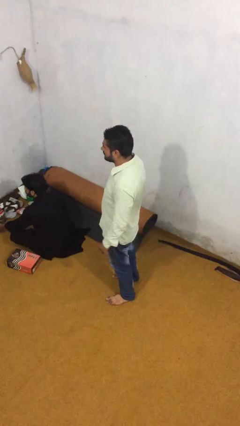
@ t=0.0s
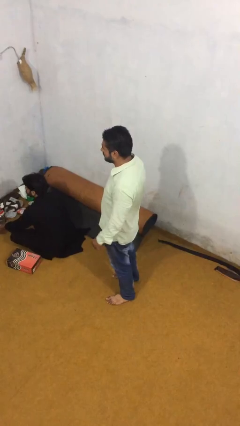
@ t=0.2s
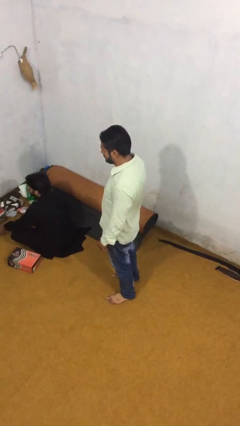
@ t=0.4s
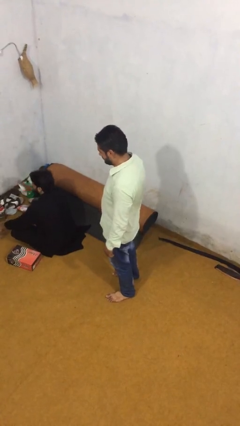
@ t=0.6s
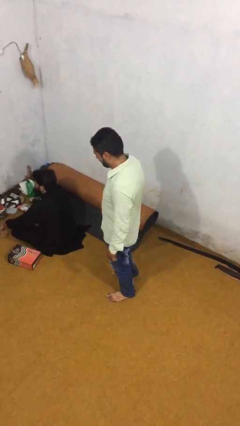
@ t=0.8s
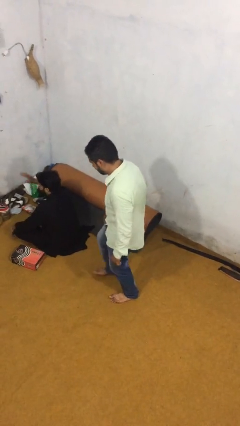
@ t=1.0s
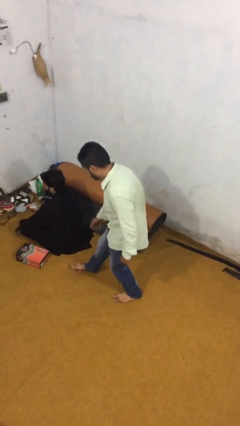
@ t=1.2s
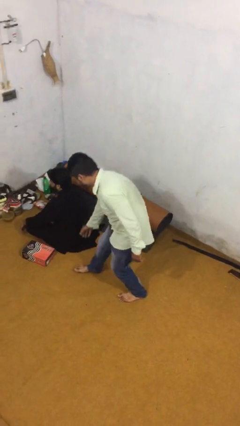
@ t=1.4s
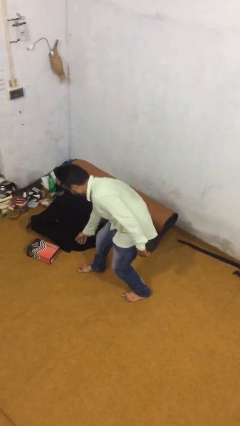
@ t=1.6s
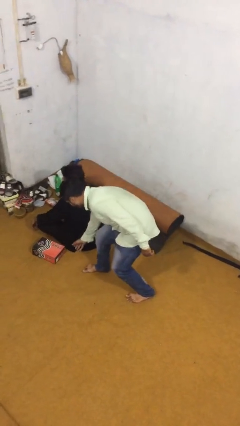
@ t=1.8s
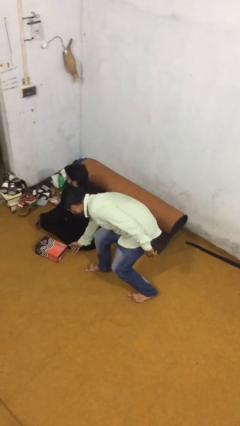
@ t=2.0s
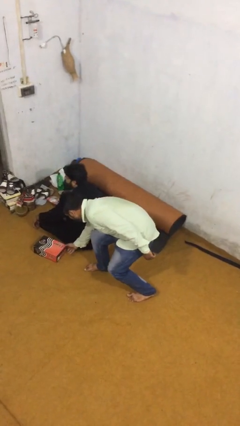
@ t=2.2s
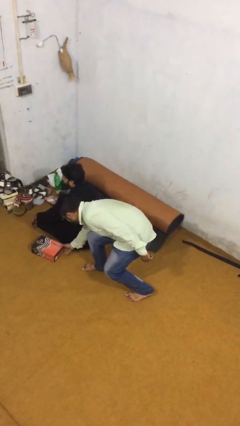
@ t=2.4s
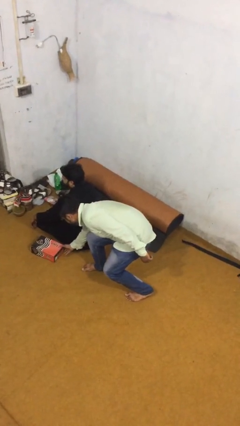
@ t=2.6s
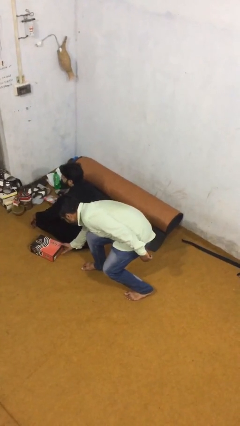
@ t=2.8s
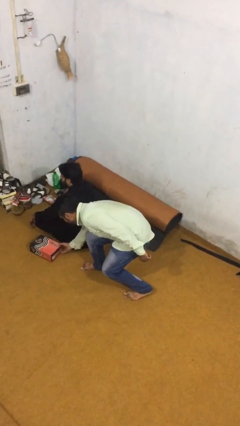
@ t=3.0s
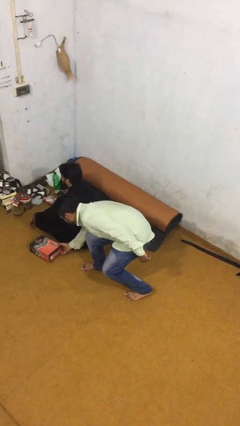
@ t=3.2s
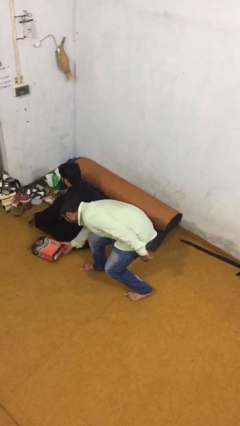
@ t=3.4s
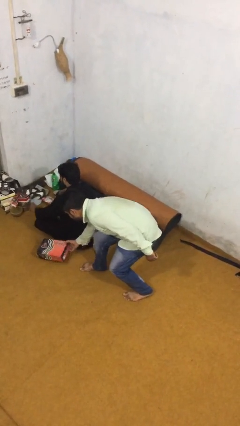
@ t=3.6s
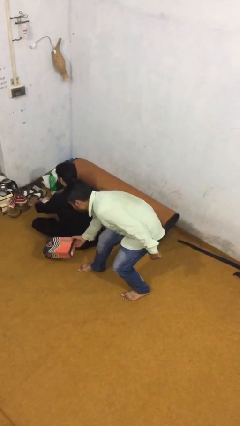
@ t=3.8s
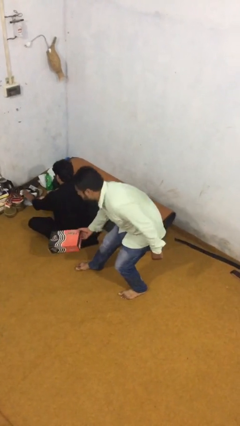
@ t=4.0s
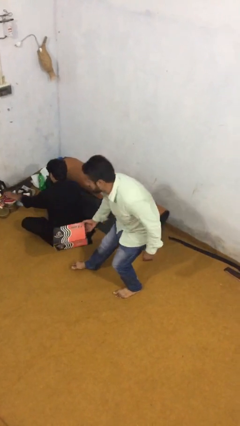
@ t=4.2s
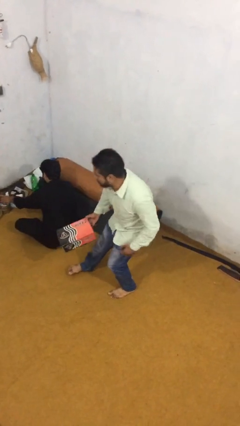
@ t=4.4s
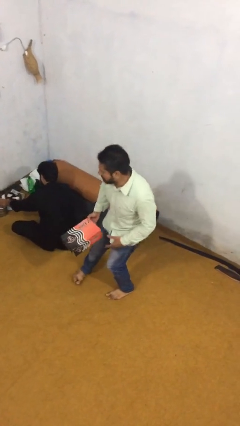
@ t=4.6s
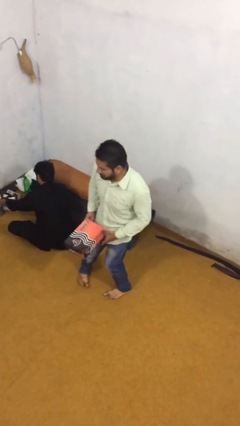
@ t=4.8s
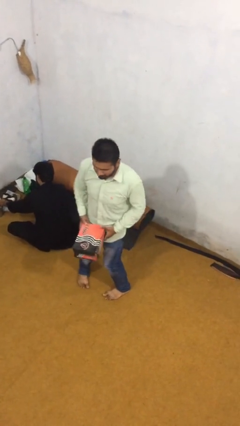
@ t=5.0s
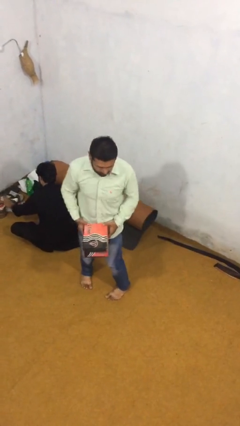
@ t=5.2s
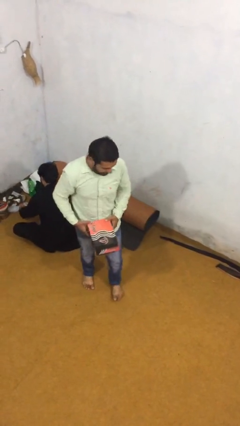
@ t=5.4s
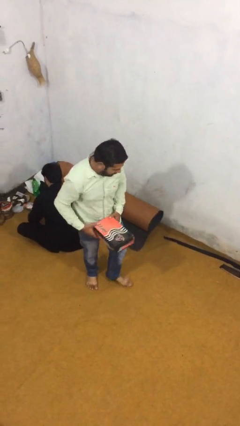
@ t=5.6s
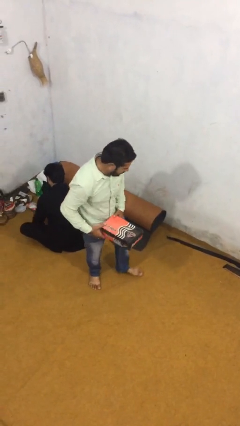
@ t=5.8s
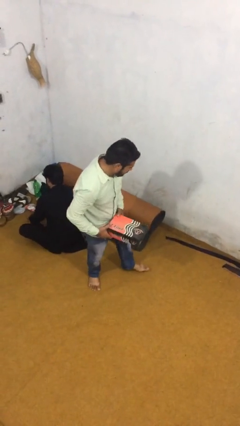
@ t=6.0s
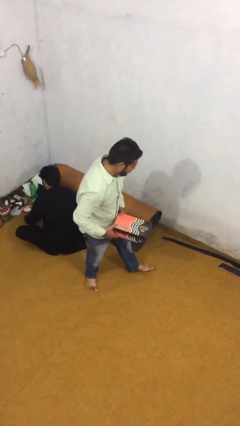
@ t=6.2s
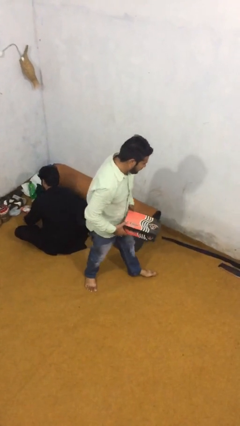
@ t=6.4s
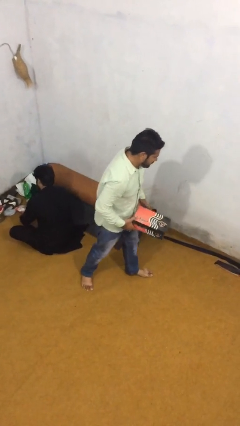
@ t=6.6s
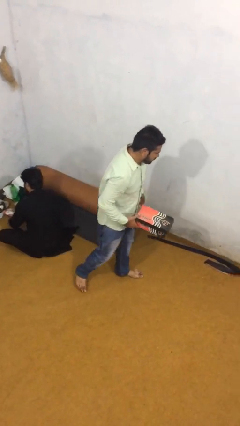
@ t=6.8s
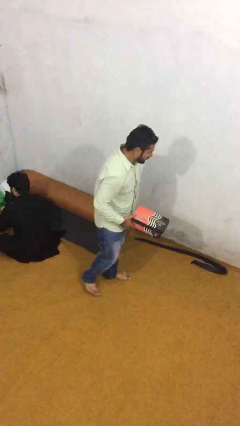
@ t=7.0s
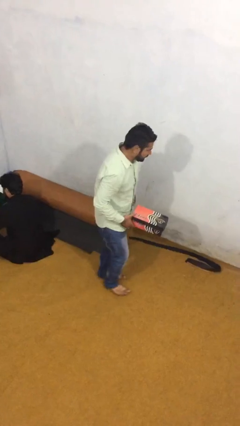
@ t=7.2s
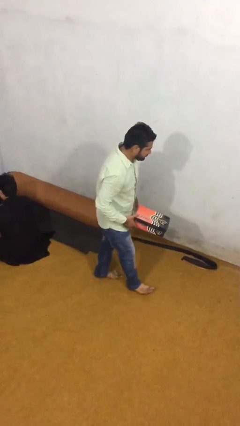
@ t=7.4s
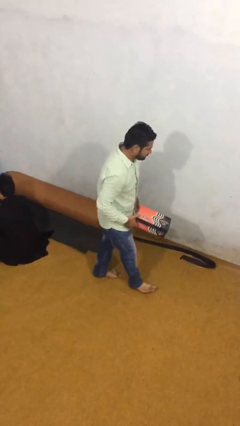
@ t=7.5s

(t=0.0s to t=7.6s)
person steals object from person

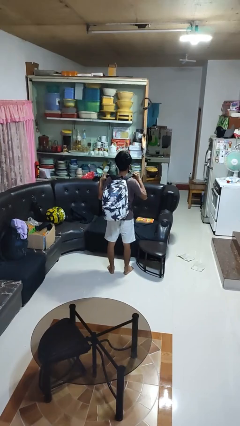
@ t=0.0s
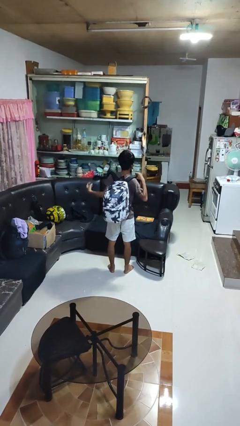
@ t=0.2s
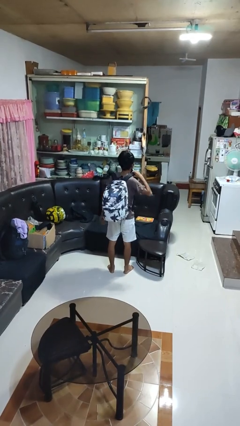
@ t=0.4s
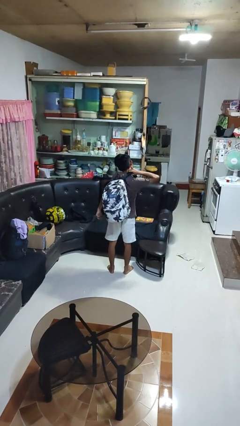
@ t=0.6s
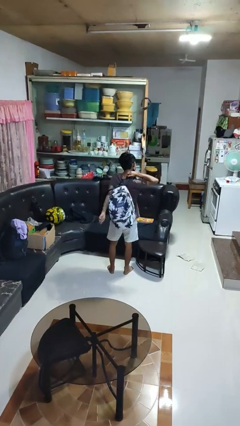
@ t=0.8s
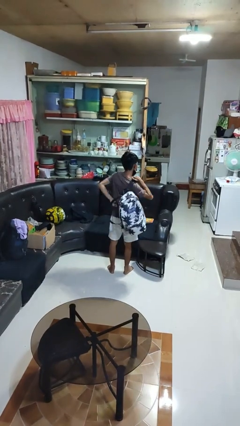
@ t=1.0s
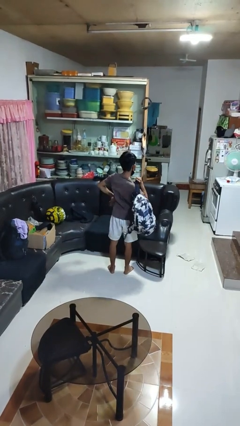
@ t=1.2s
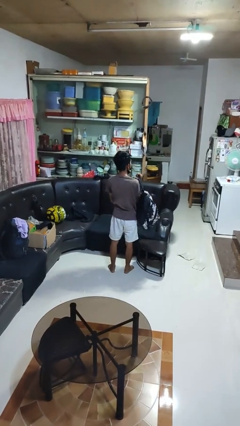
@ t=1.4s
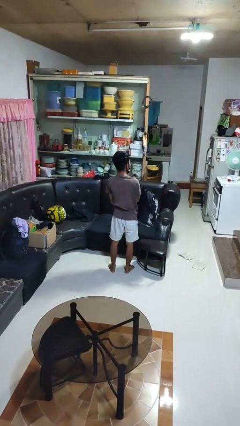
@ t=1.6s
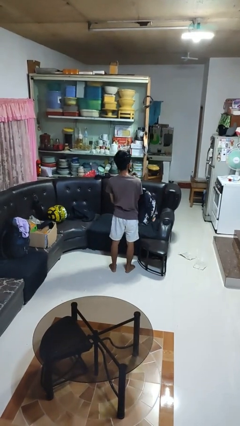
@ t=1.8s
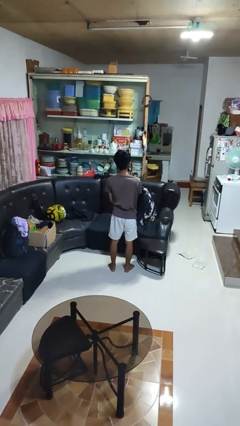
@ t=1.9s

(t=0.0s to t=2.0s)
person takes off backpack

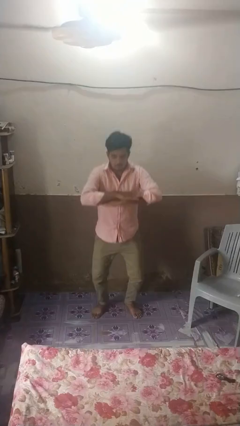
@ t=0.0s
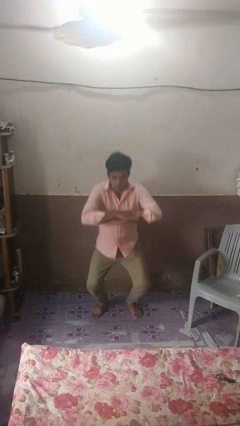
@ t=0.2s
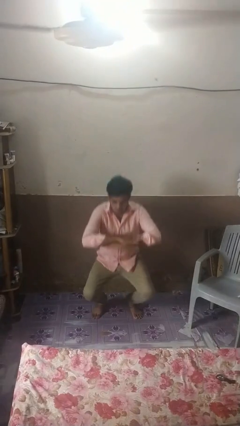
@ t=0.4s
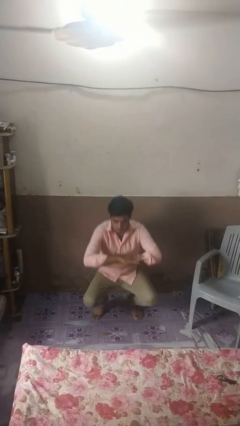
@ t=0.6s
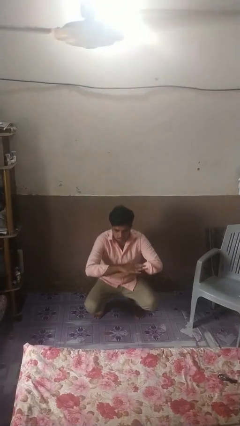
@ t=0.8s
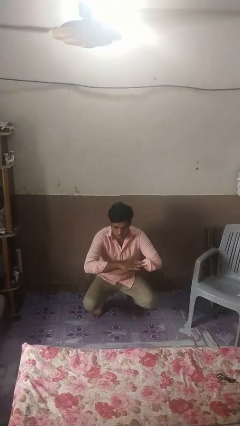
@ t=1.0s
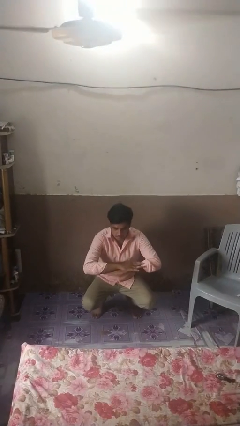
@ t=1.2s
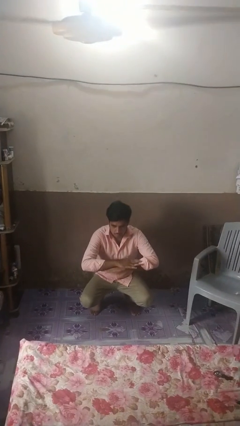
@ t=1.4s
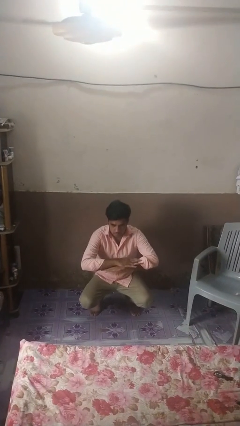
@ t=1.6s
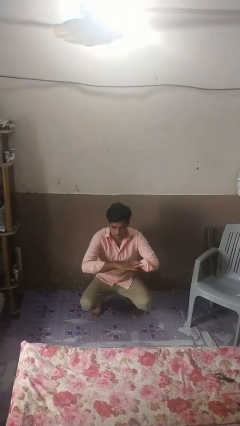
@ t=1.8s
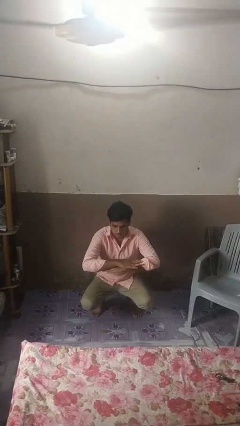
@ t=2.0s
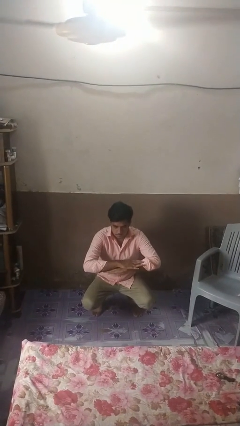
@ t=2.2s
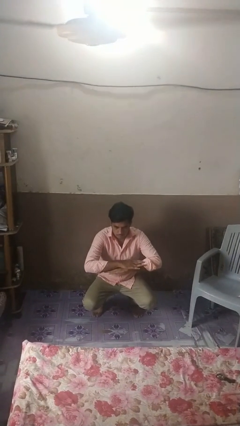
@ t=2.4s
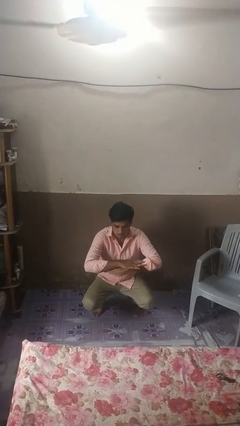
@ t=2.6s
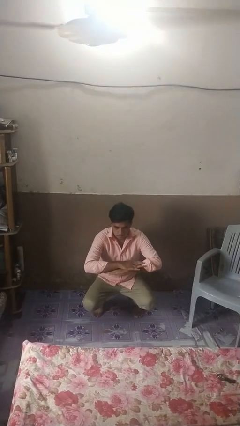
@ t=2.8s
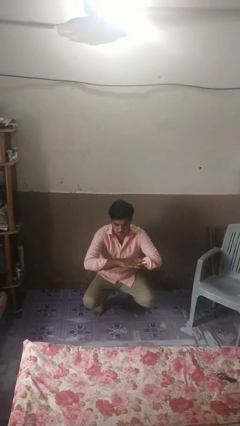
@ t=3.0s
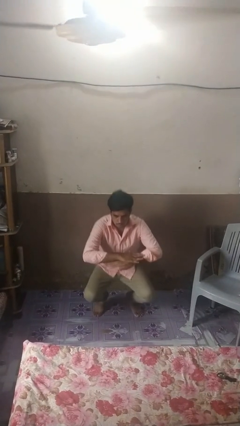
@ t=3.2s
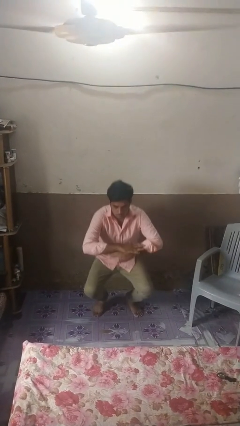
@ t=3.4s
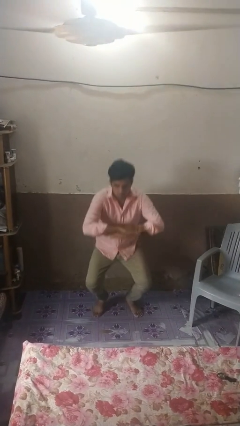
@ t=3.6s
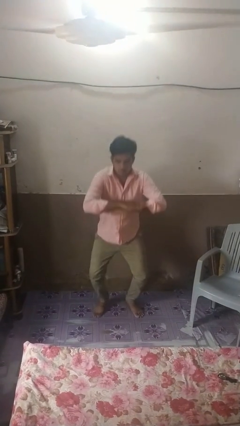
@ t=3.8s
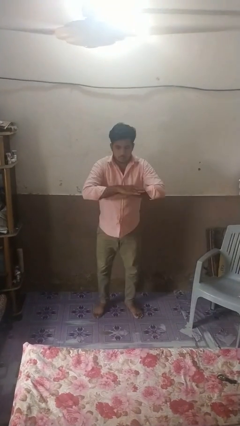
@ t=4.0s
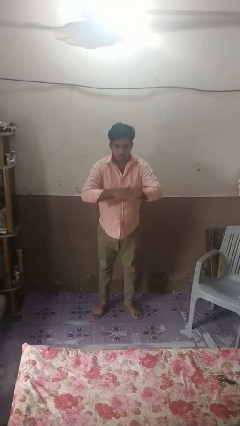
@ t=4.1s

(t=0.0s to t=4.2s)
person squats

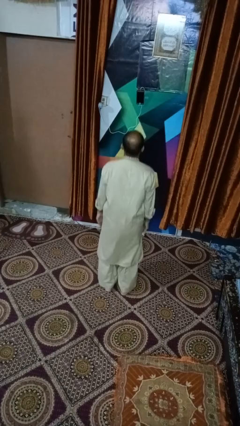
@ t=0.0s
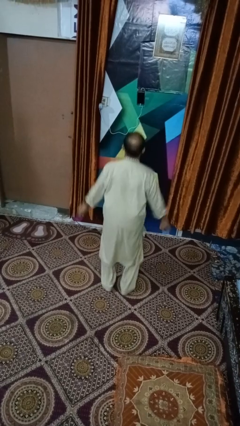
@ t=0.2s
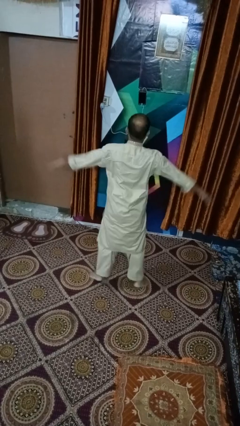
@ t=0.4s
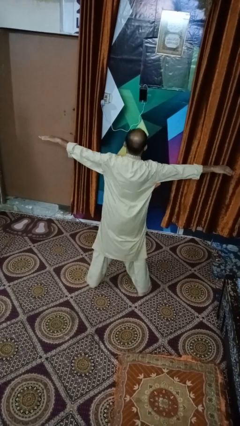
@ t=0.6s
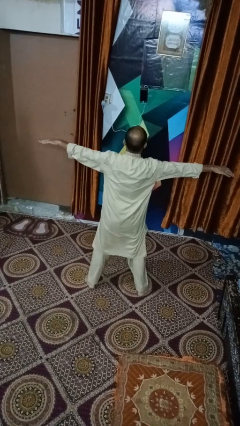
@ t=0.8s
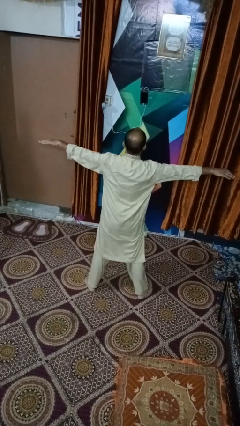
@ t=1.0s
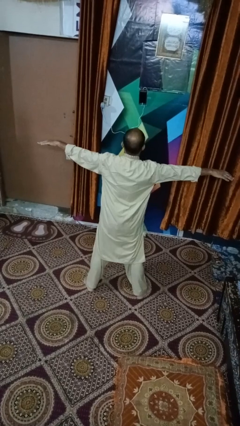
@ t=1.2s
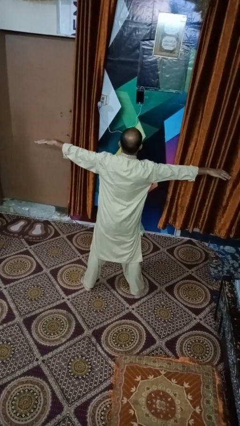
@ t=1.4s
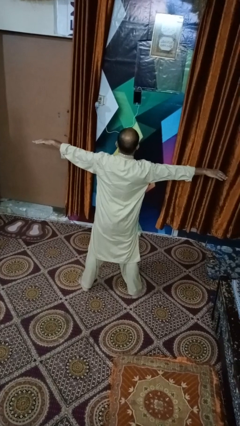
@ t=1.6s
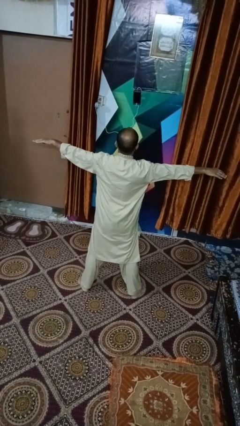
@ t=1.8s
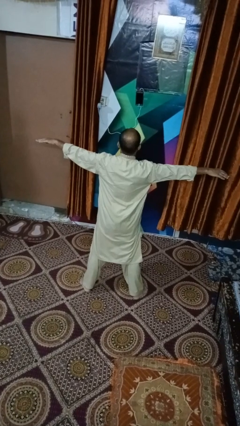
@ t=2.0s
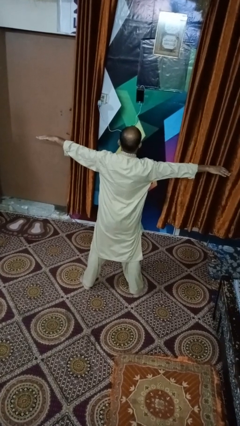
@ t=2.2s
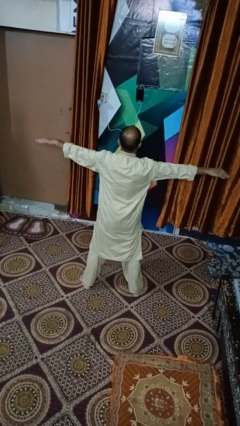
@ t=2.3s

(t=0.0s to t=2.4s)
person exercises with jumping jacks

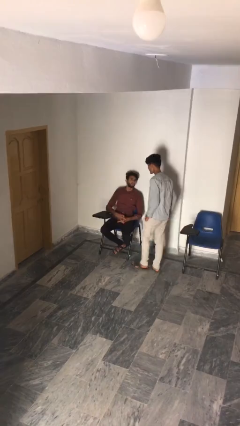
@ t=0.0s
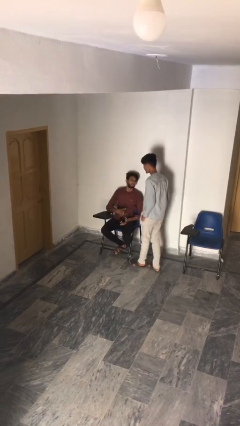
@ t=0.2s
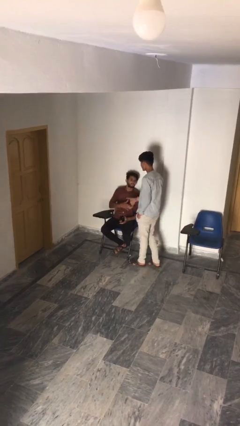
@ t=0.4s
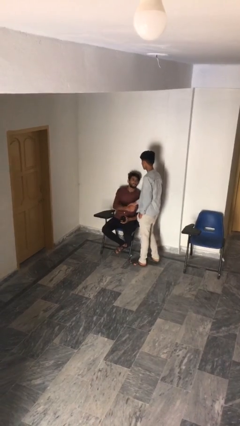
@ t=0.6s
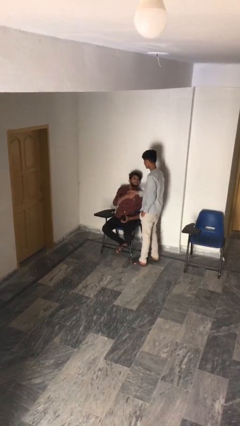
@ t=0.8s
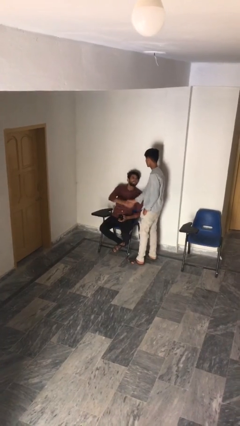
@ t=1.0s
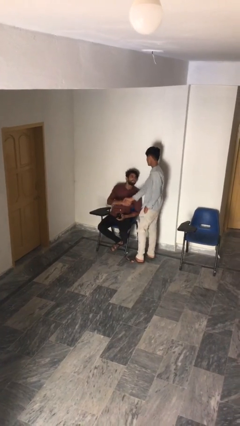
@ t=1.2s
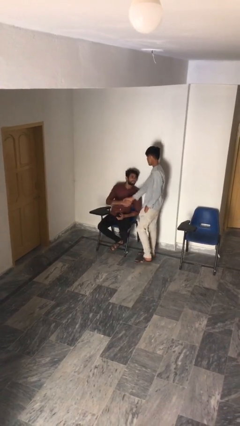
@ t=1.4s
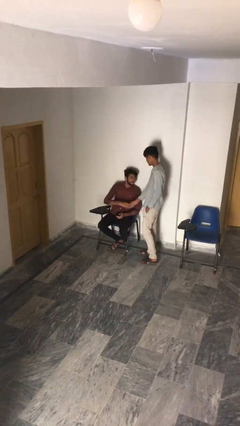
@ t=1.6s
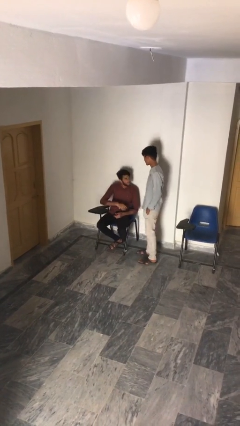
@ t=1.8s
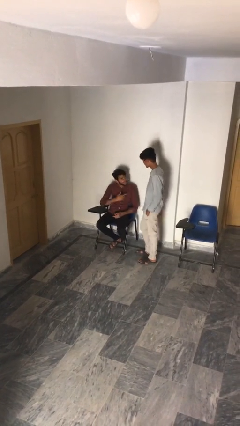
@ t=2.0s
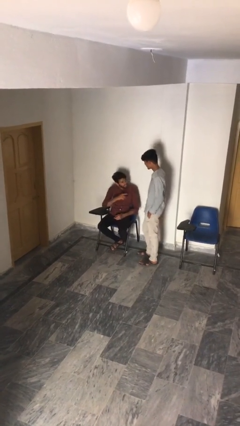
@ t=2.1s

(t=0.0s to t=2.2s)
person shakes hand
